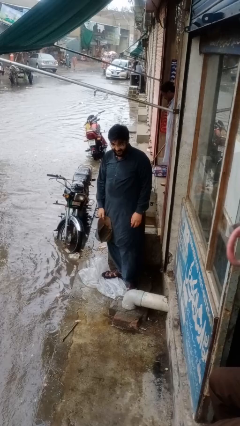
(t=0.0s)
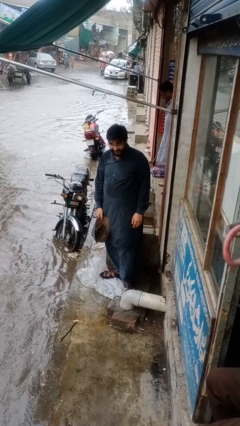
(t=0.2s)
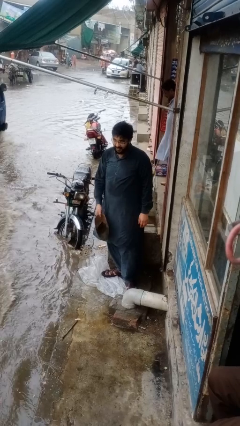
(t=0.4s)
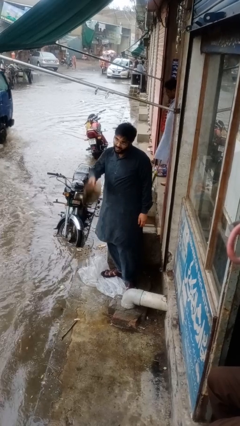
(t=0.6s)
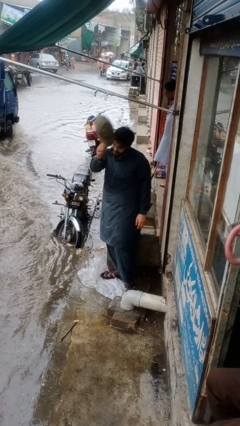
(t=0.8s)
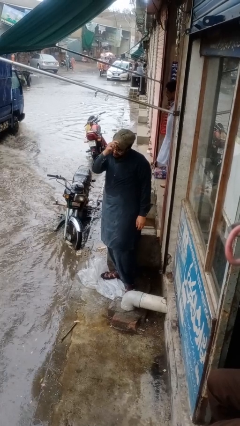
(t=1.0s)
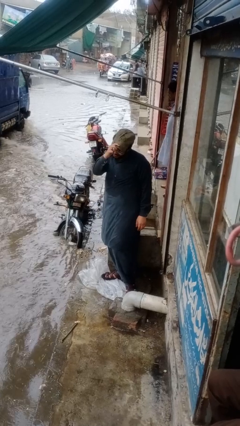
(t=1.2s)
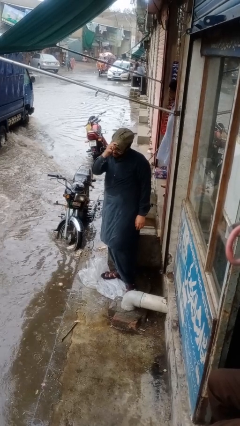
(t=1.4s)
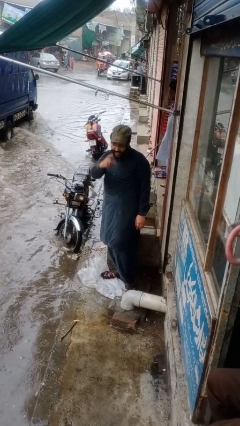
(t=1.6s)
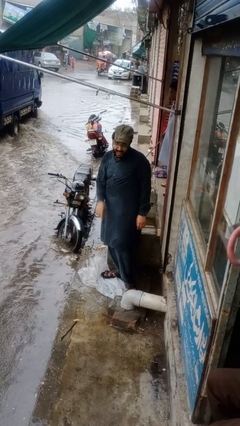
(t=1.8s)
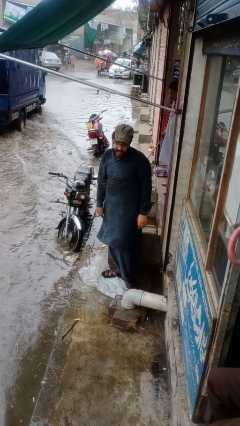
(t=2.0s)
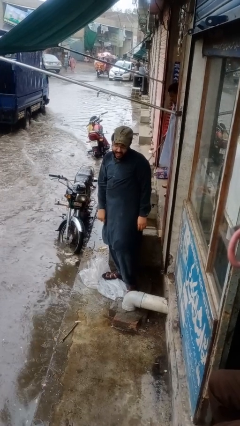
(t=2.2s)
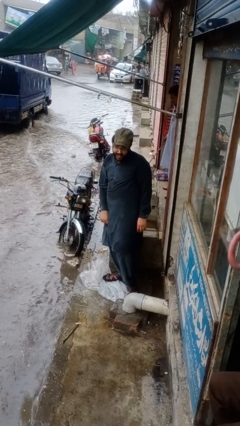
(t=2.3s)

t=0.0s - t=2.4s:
person puts on hat

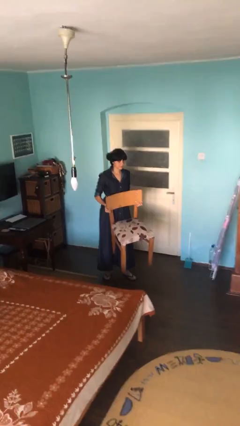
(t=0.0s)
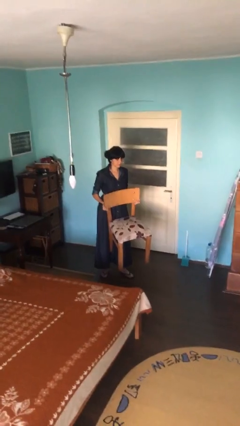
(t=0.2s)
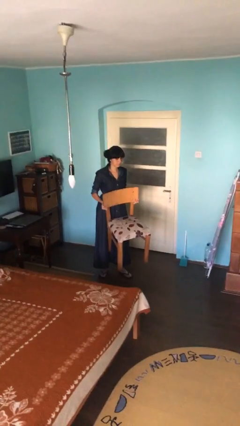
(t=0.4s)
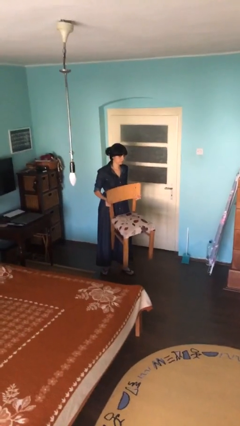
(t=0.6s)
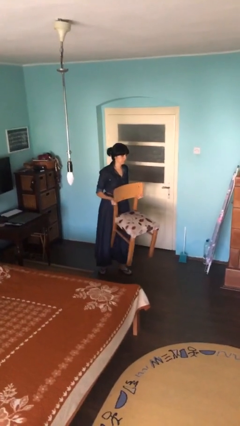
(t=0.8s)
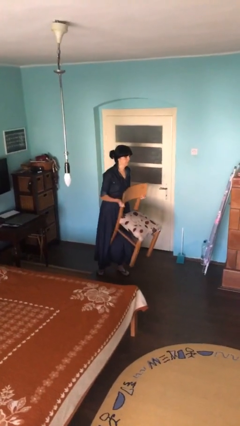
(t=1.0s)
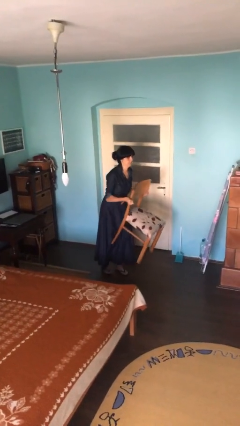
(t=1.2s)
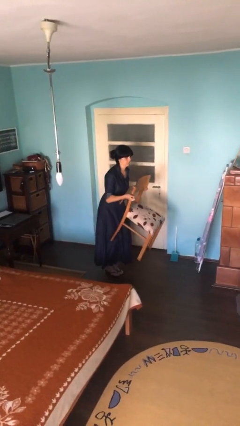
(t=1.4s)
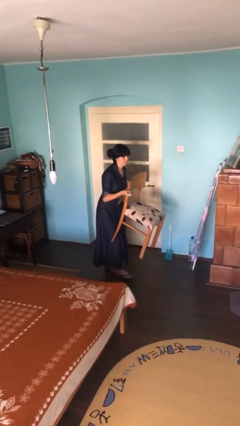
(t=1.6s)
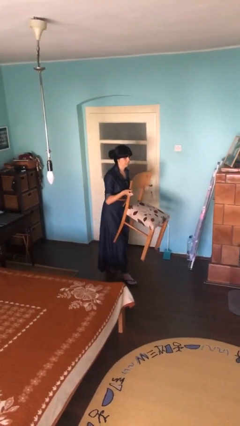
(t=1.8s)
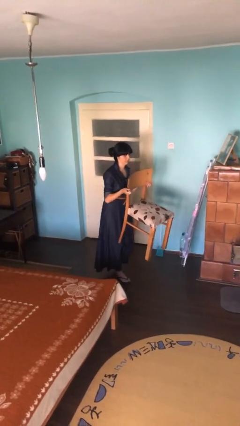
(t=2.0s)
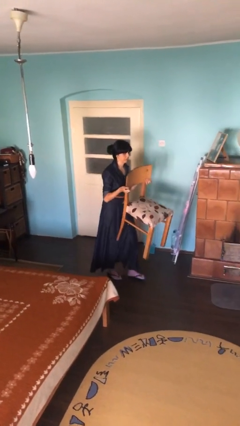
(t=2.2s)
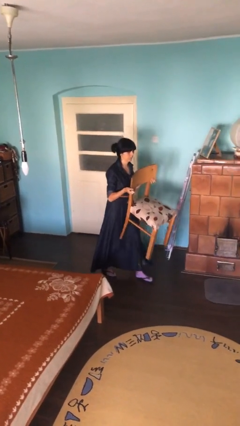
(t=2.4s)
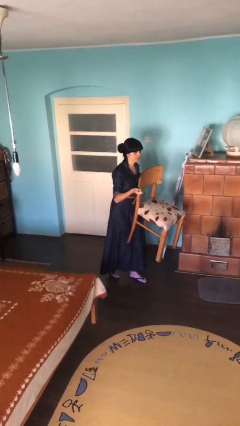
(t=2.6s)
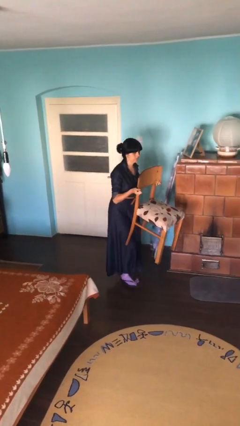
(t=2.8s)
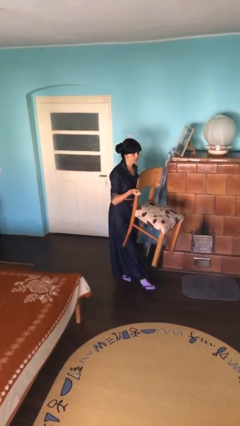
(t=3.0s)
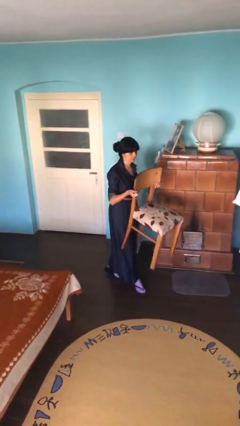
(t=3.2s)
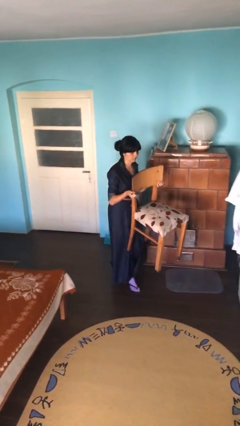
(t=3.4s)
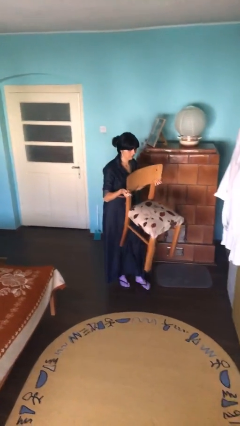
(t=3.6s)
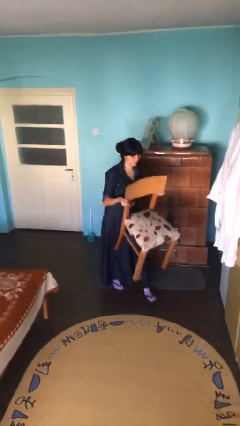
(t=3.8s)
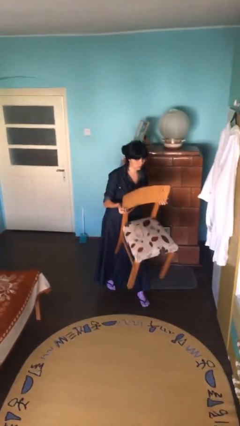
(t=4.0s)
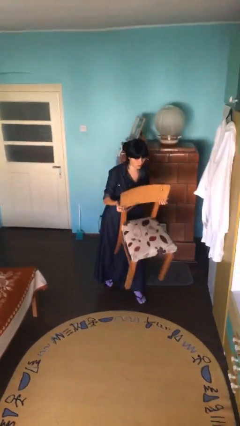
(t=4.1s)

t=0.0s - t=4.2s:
person carries heavy object

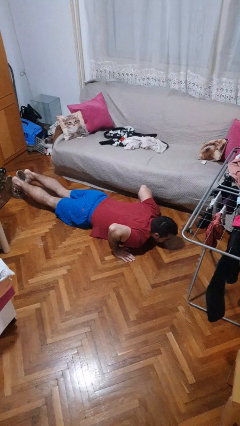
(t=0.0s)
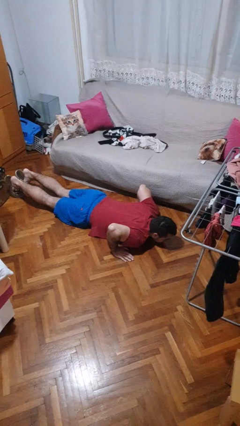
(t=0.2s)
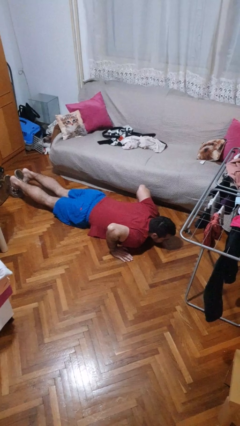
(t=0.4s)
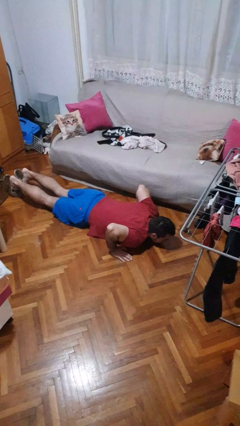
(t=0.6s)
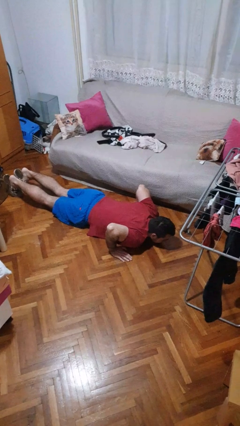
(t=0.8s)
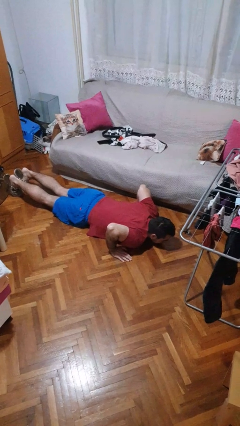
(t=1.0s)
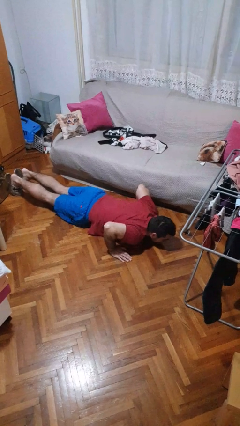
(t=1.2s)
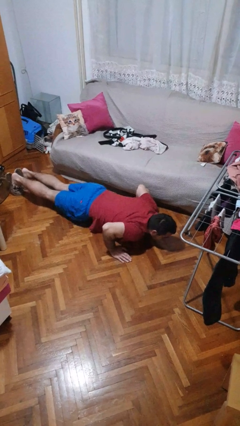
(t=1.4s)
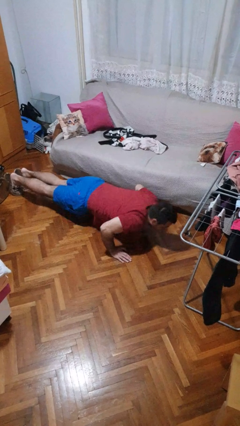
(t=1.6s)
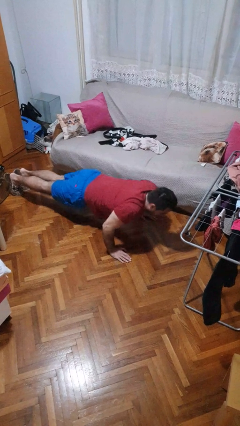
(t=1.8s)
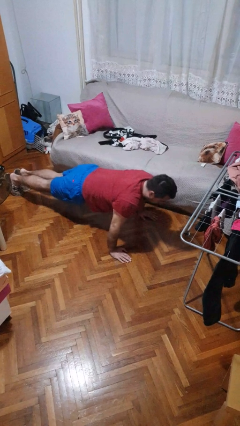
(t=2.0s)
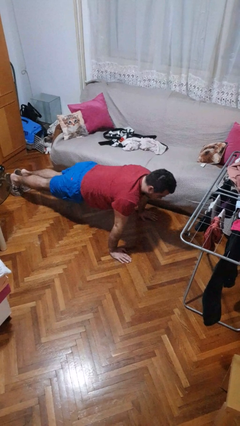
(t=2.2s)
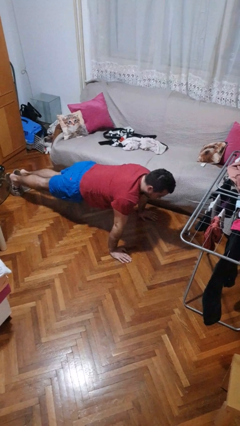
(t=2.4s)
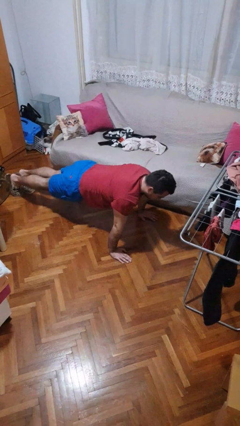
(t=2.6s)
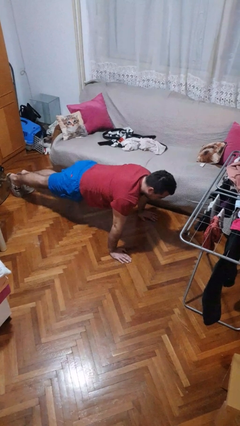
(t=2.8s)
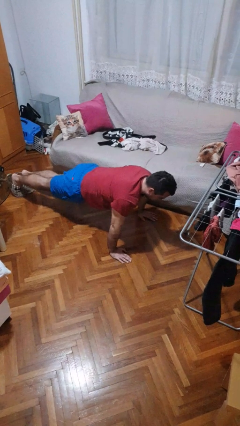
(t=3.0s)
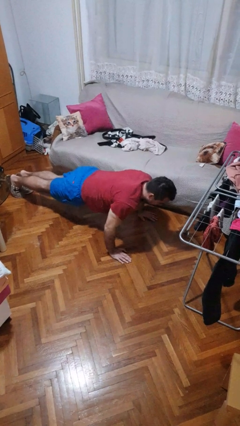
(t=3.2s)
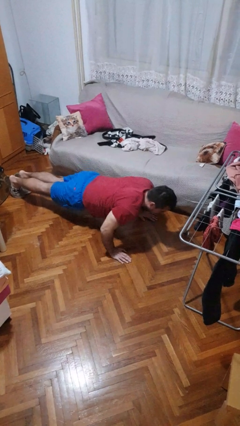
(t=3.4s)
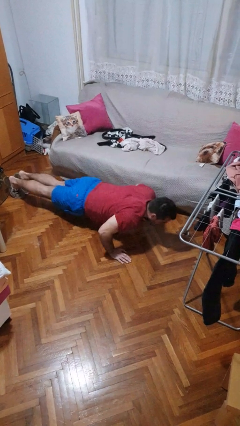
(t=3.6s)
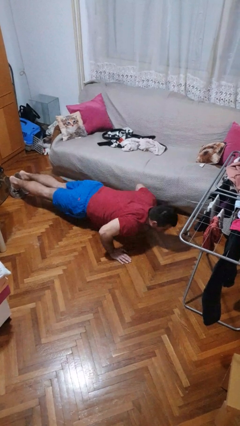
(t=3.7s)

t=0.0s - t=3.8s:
person exercises with pushup

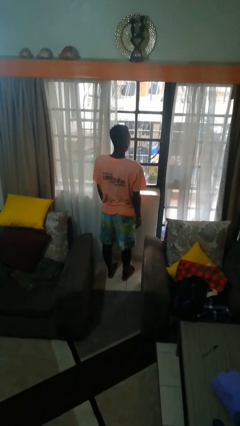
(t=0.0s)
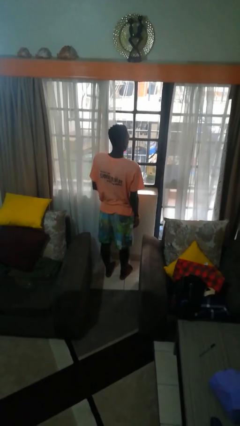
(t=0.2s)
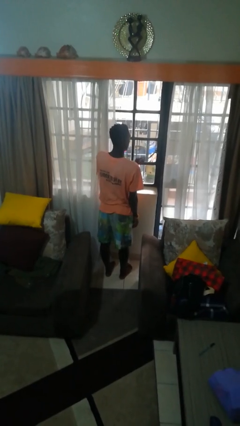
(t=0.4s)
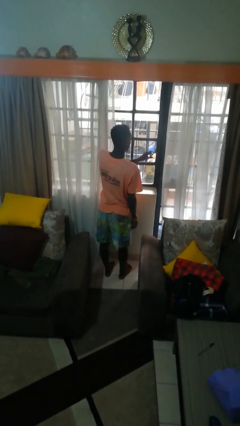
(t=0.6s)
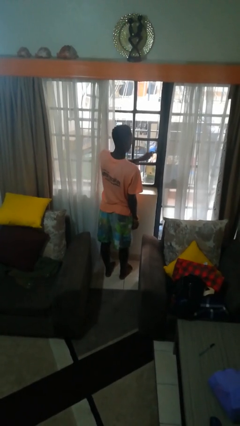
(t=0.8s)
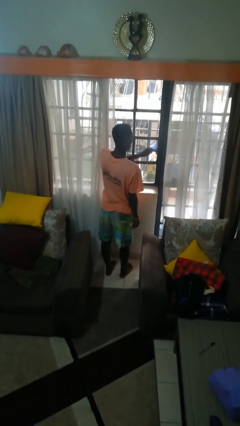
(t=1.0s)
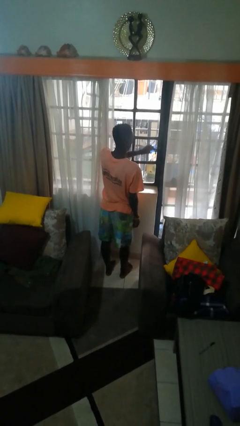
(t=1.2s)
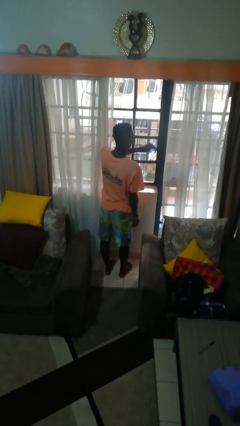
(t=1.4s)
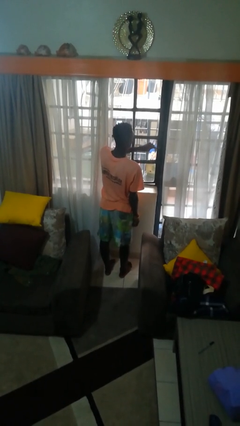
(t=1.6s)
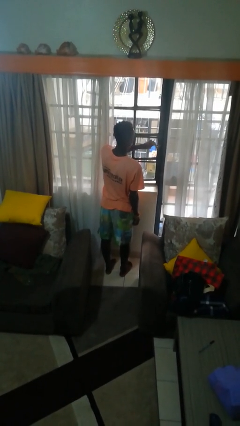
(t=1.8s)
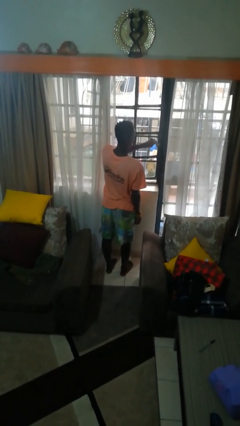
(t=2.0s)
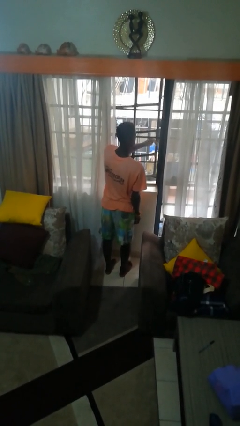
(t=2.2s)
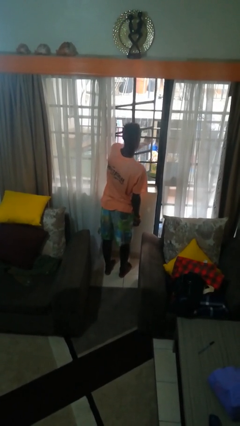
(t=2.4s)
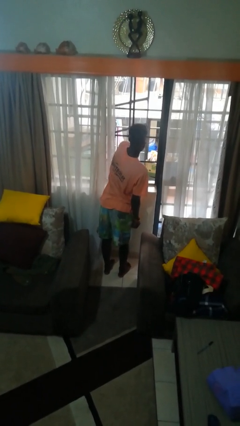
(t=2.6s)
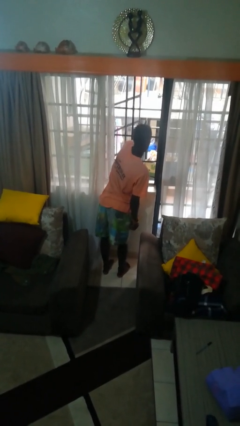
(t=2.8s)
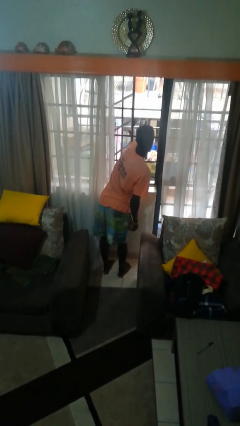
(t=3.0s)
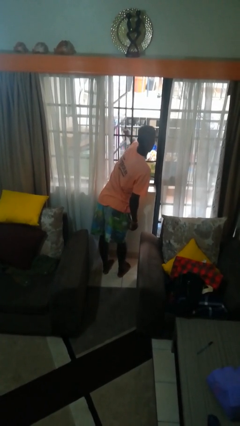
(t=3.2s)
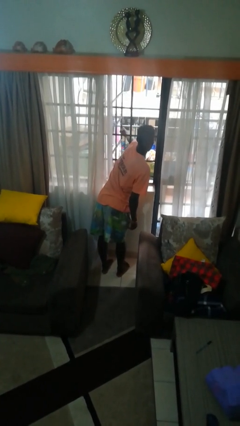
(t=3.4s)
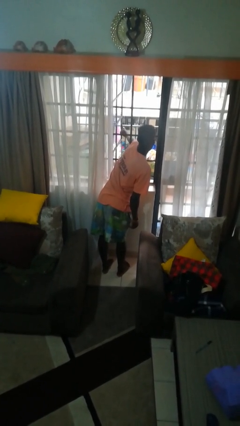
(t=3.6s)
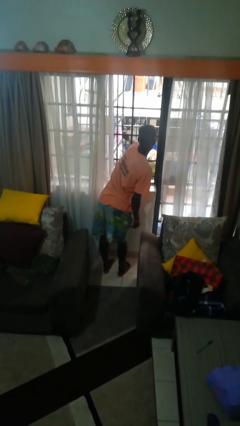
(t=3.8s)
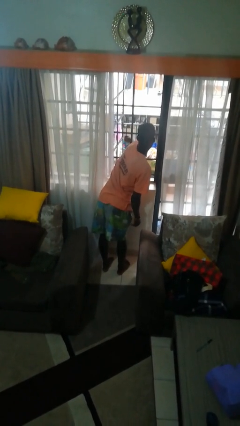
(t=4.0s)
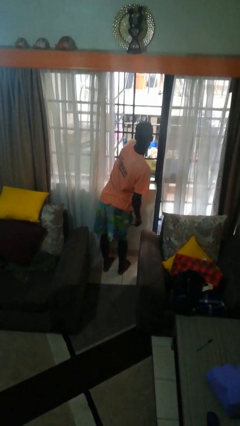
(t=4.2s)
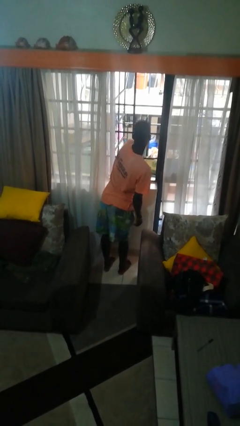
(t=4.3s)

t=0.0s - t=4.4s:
person opens home window

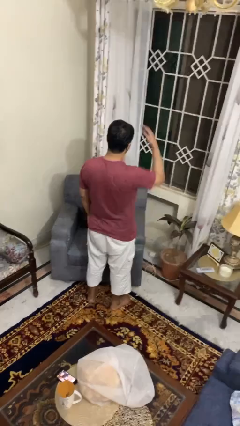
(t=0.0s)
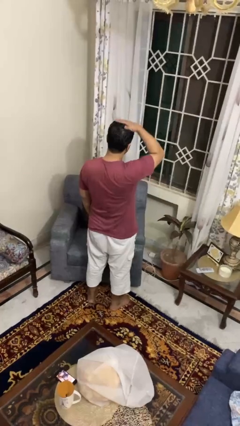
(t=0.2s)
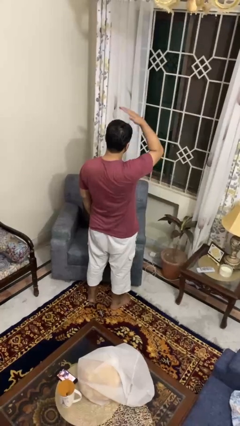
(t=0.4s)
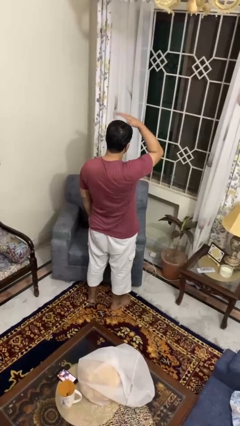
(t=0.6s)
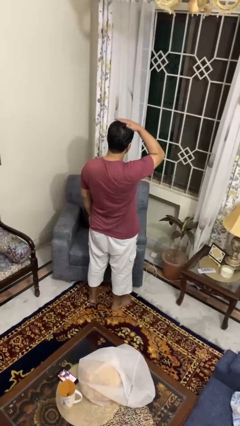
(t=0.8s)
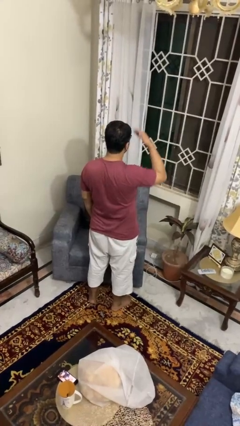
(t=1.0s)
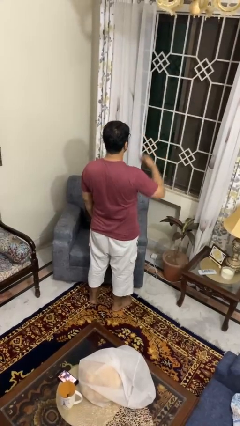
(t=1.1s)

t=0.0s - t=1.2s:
person pats head

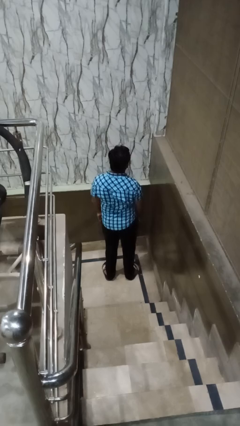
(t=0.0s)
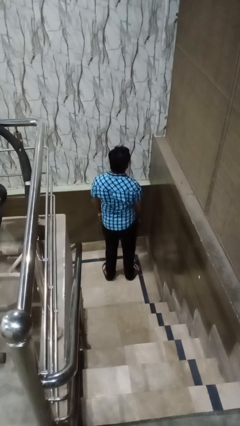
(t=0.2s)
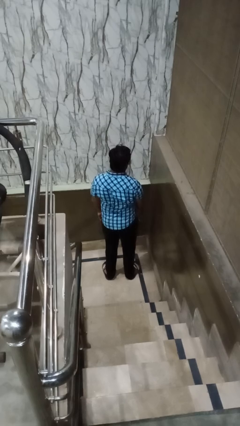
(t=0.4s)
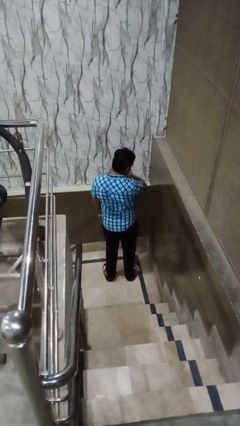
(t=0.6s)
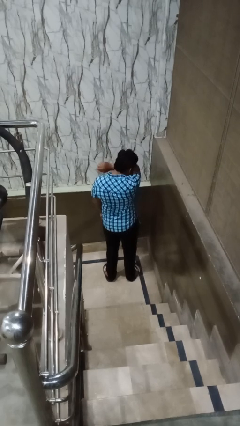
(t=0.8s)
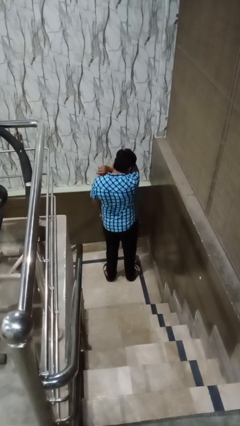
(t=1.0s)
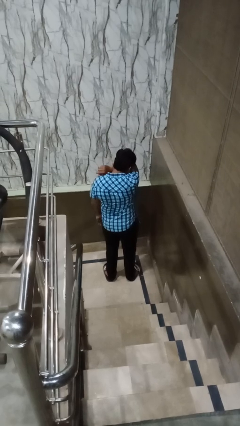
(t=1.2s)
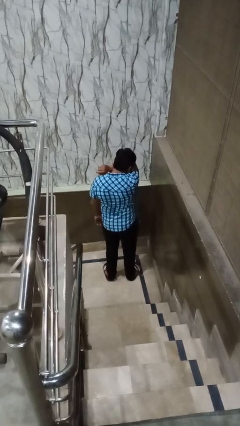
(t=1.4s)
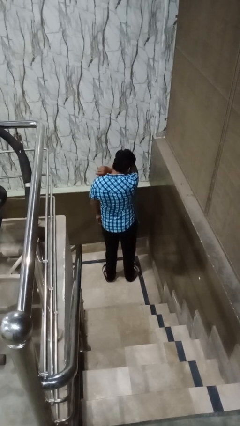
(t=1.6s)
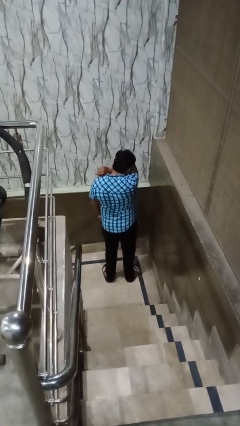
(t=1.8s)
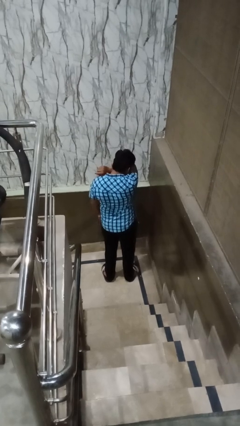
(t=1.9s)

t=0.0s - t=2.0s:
person sneezes into arm
